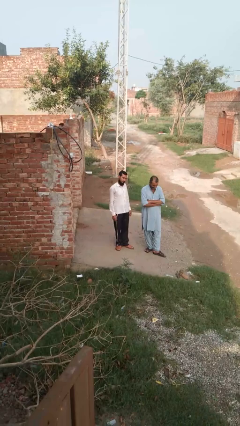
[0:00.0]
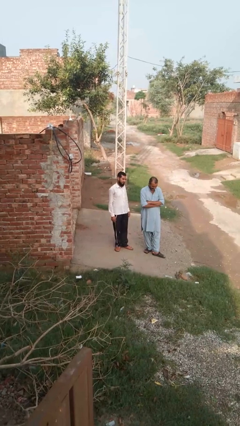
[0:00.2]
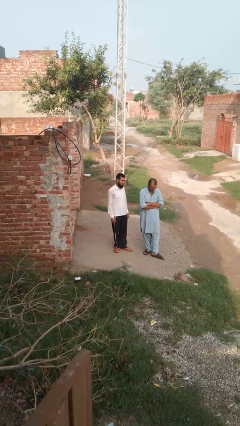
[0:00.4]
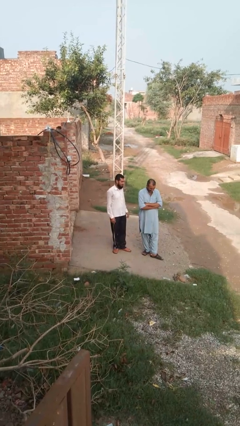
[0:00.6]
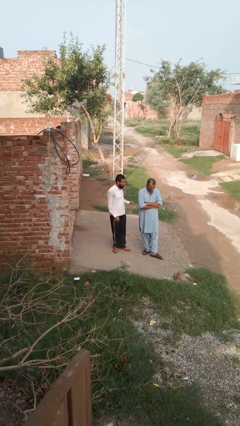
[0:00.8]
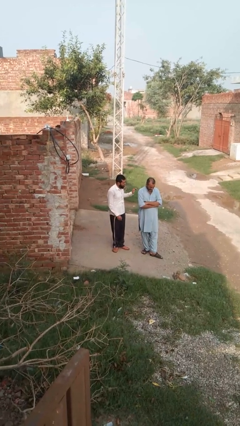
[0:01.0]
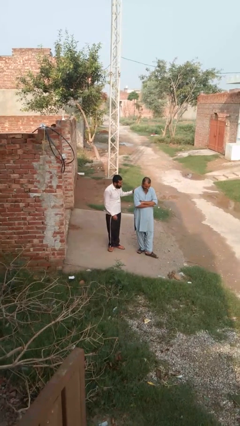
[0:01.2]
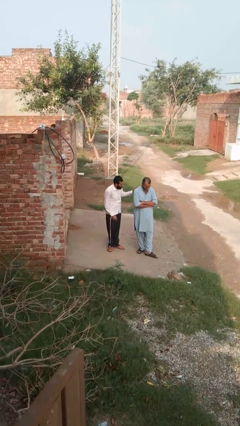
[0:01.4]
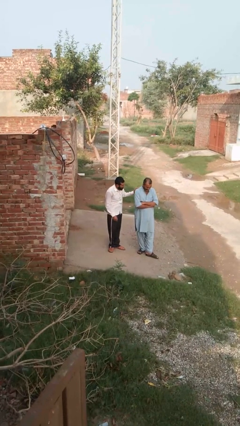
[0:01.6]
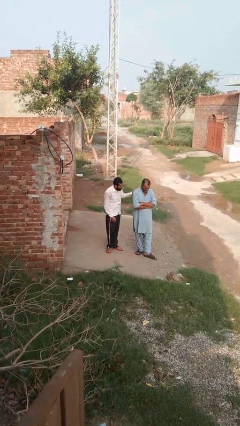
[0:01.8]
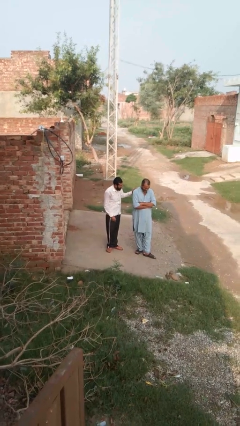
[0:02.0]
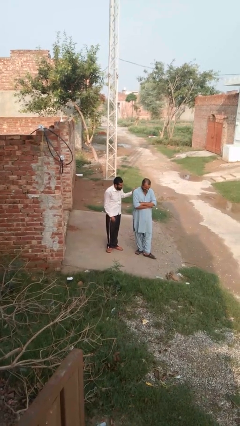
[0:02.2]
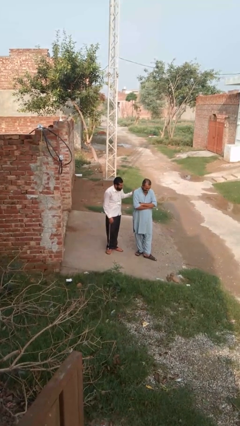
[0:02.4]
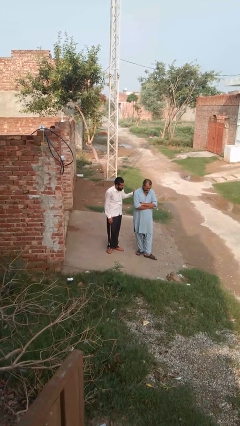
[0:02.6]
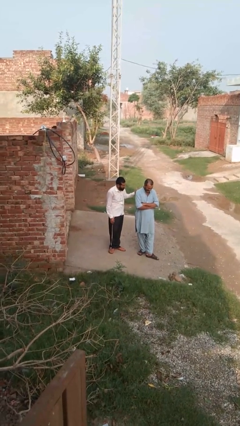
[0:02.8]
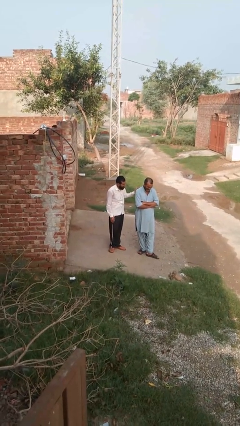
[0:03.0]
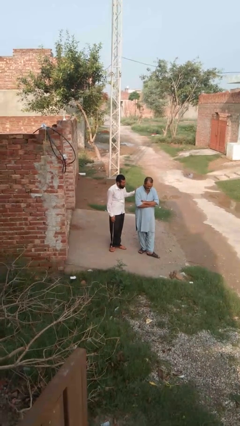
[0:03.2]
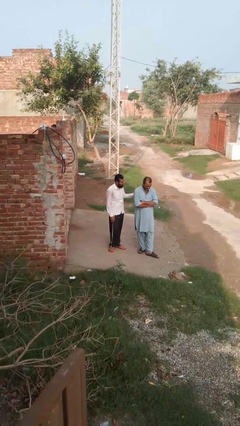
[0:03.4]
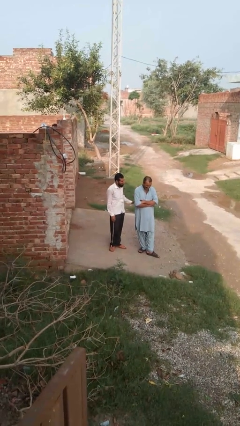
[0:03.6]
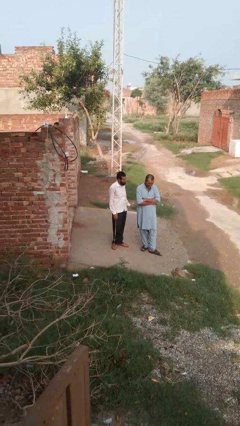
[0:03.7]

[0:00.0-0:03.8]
person pounds shoulders of person

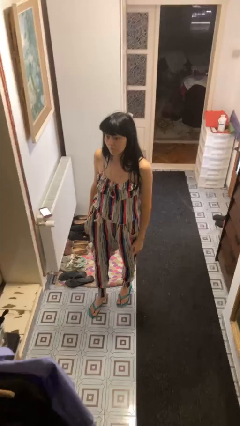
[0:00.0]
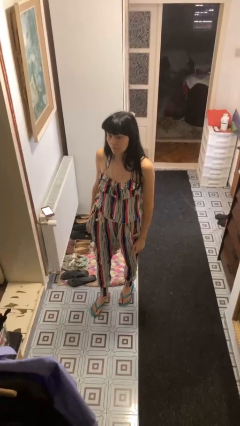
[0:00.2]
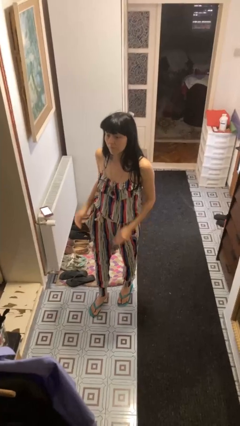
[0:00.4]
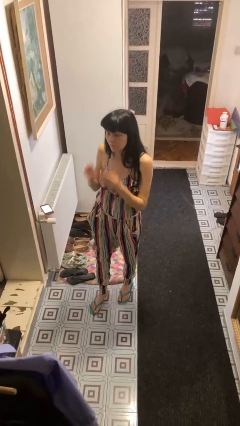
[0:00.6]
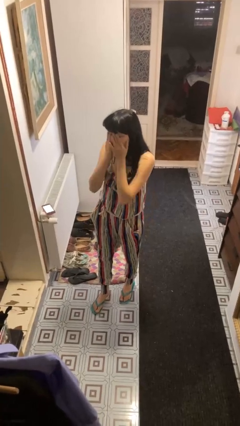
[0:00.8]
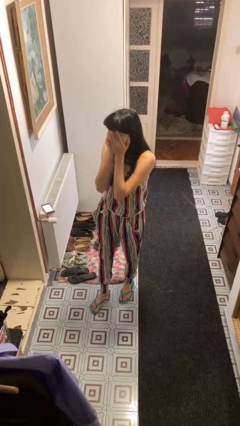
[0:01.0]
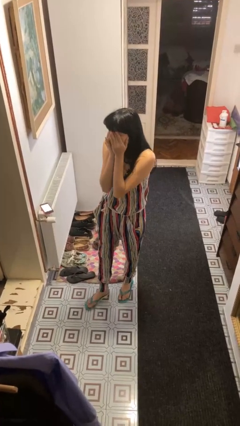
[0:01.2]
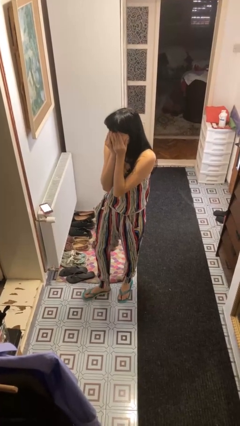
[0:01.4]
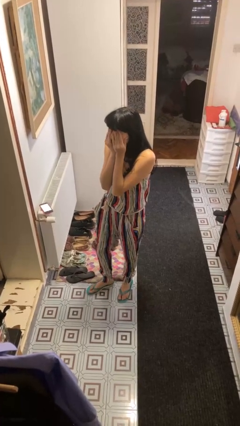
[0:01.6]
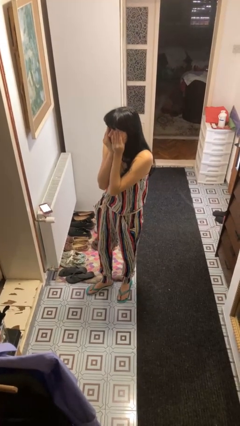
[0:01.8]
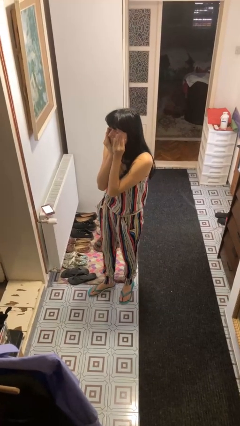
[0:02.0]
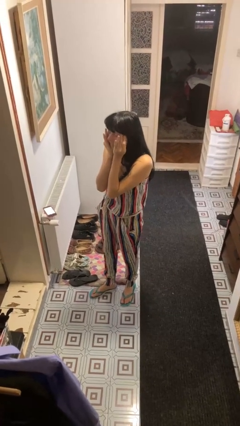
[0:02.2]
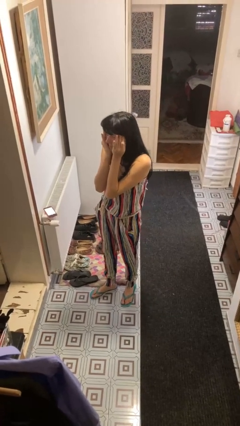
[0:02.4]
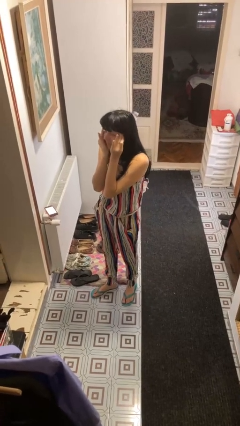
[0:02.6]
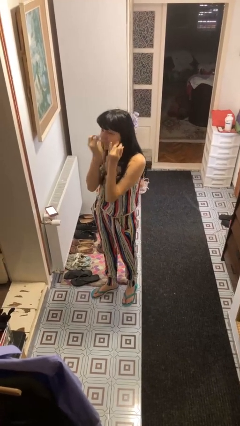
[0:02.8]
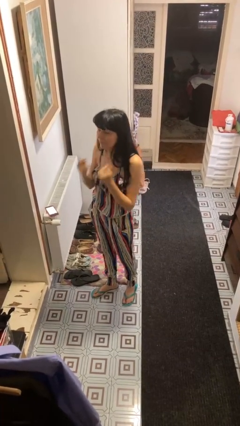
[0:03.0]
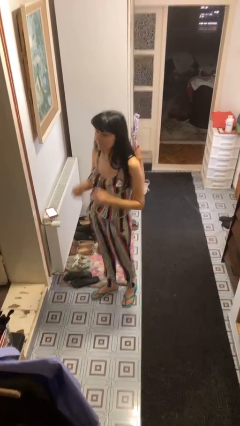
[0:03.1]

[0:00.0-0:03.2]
person rubs eyes

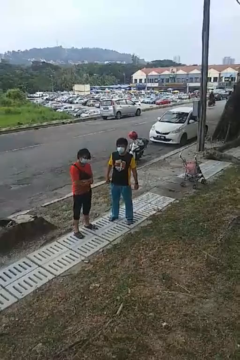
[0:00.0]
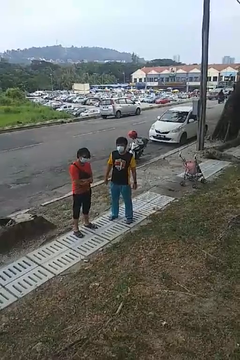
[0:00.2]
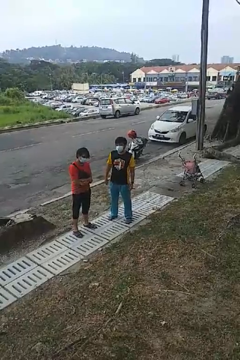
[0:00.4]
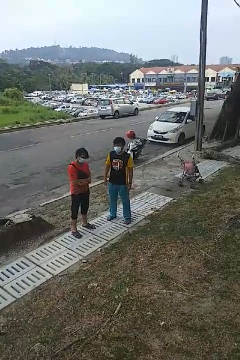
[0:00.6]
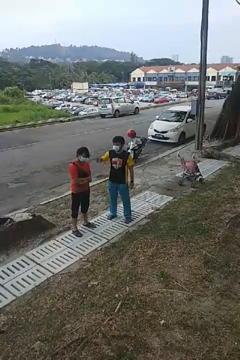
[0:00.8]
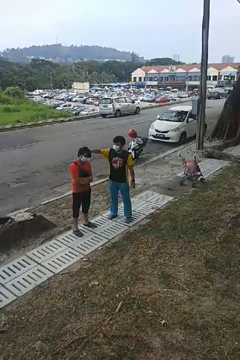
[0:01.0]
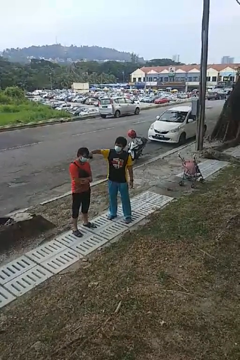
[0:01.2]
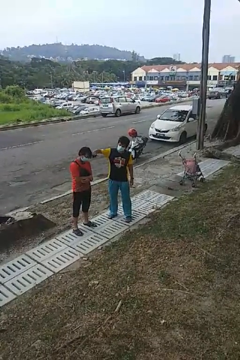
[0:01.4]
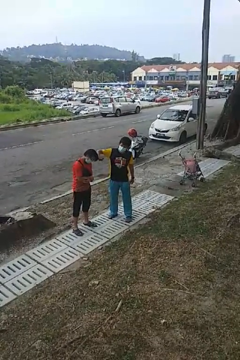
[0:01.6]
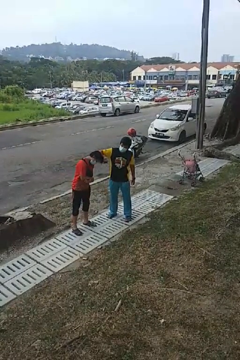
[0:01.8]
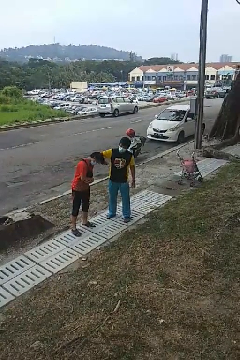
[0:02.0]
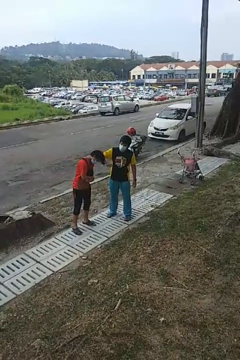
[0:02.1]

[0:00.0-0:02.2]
person grabs person by hair

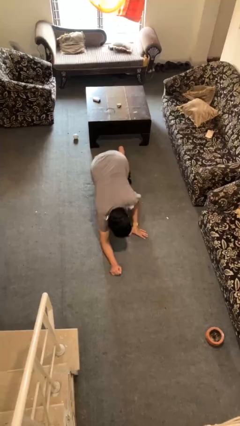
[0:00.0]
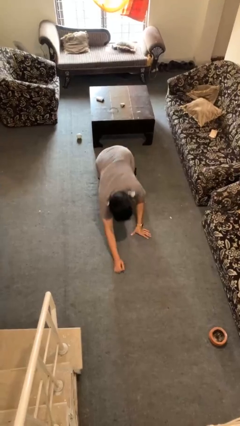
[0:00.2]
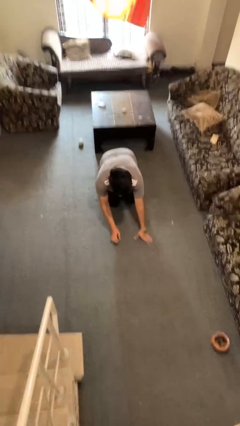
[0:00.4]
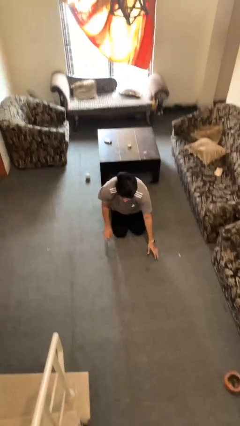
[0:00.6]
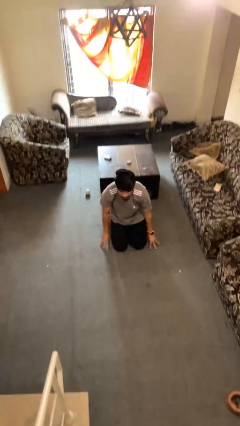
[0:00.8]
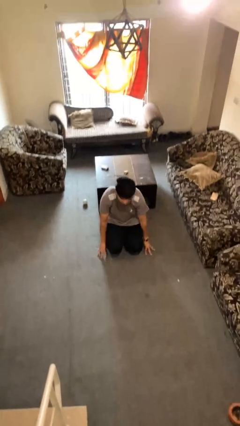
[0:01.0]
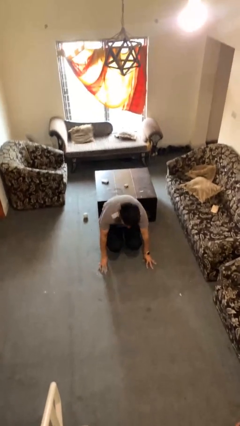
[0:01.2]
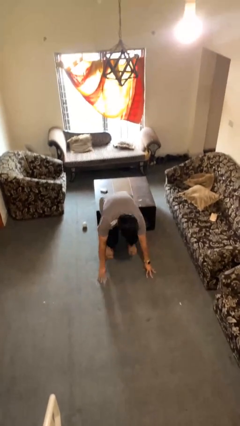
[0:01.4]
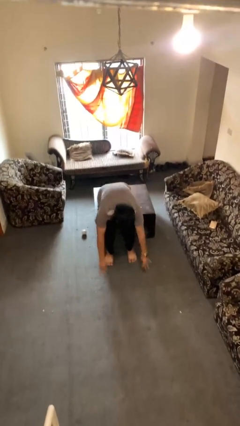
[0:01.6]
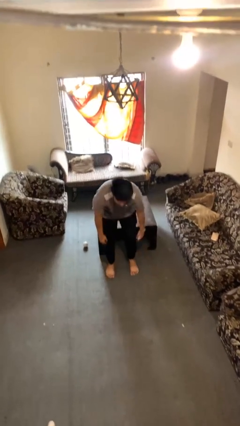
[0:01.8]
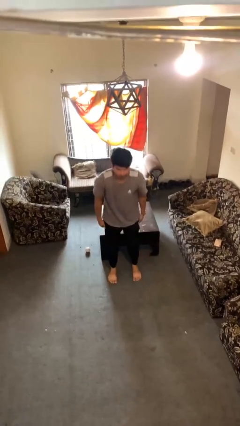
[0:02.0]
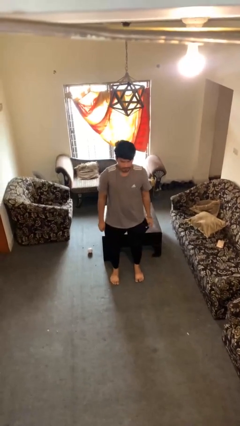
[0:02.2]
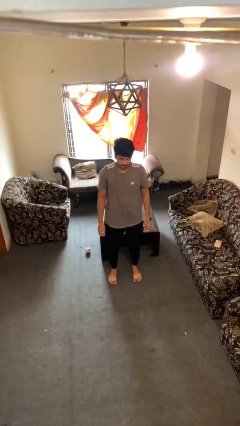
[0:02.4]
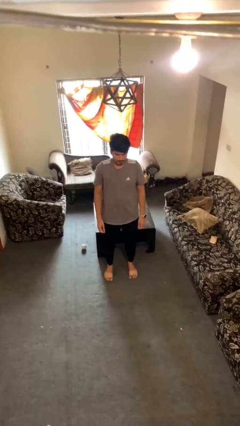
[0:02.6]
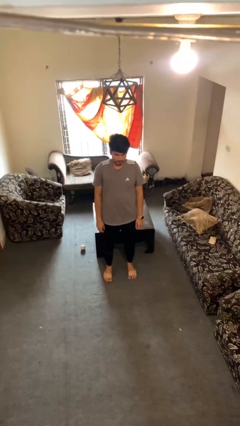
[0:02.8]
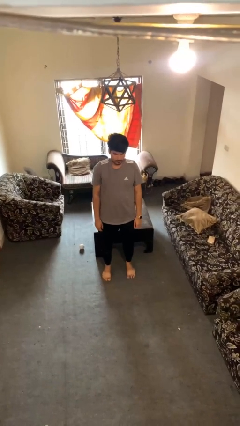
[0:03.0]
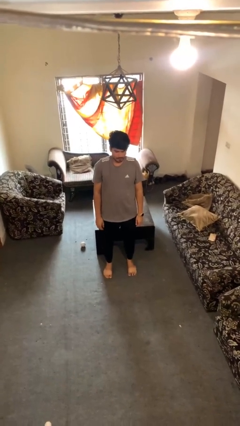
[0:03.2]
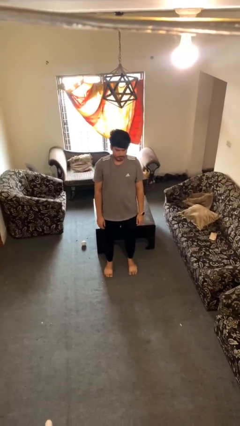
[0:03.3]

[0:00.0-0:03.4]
person stands up from floor

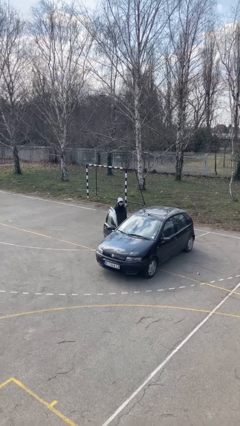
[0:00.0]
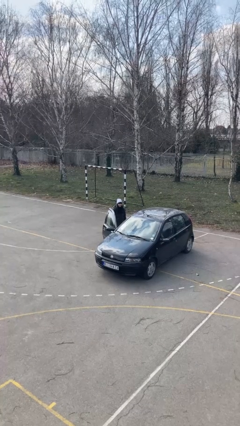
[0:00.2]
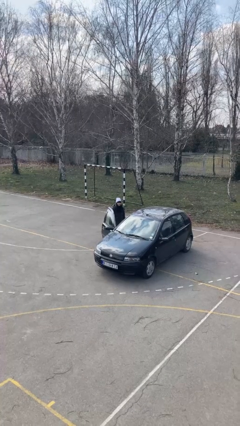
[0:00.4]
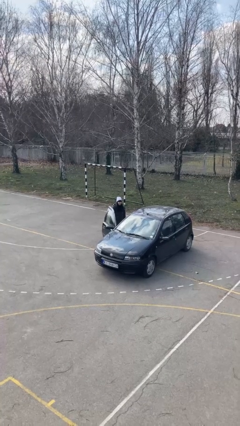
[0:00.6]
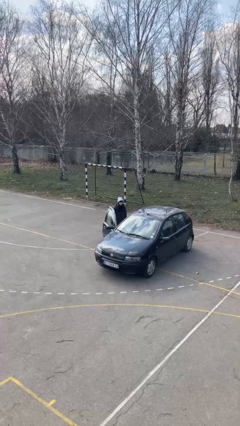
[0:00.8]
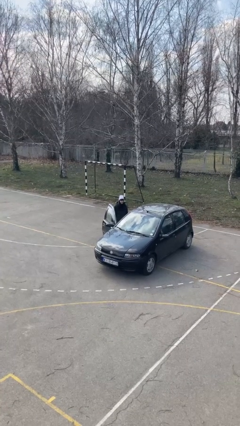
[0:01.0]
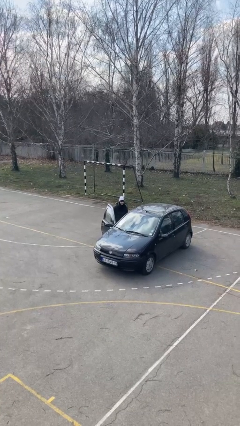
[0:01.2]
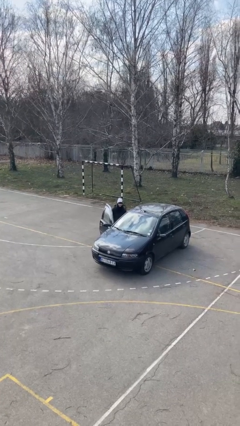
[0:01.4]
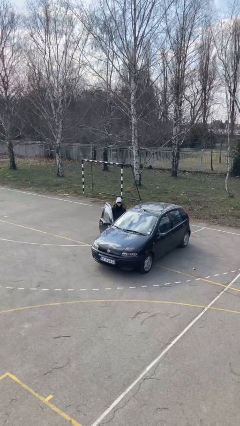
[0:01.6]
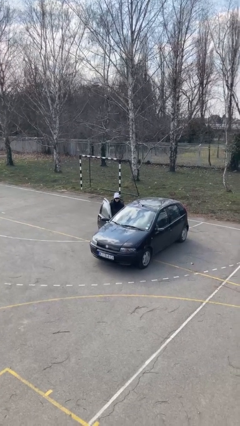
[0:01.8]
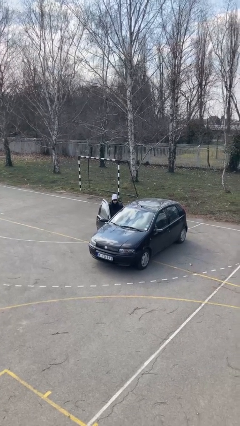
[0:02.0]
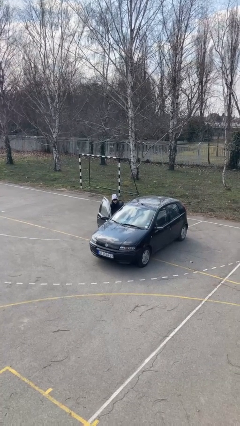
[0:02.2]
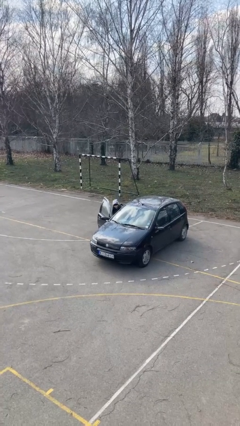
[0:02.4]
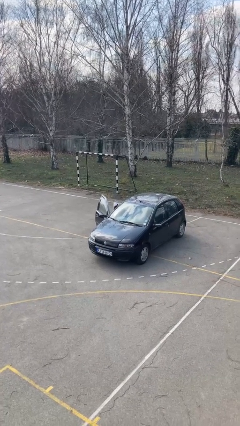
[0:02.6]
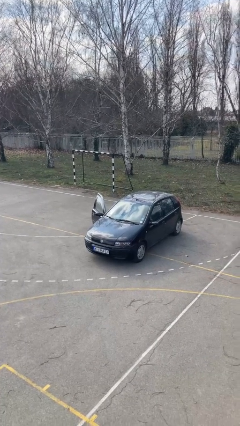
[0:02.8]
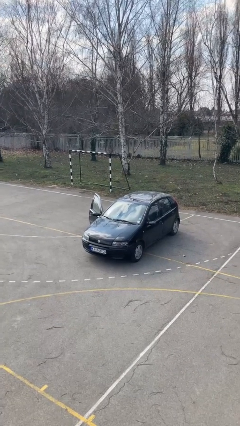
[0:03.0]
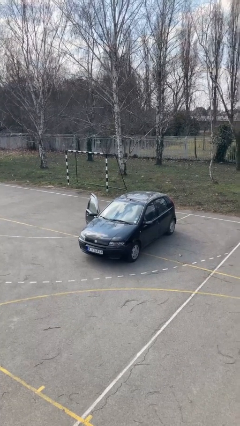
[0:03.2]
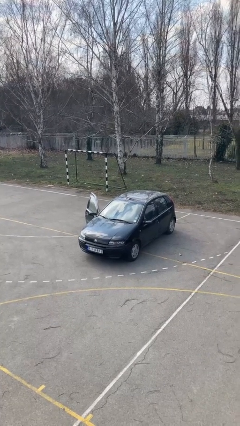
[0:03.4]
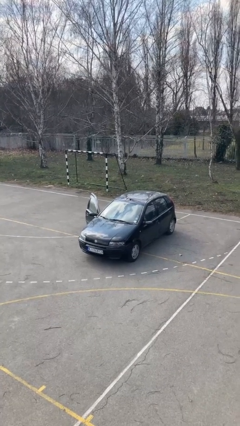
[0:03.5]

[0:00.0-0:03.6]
person enters car

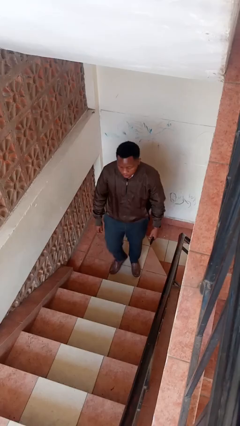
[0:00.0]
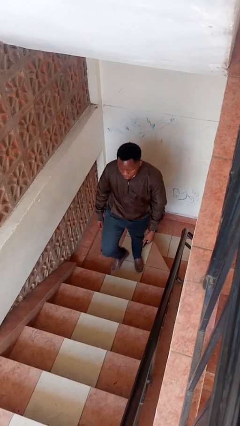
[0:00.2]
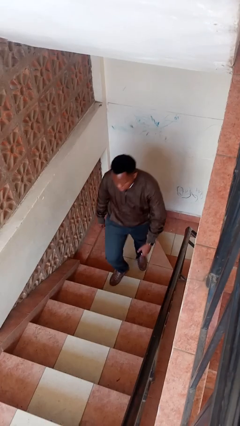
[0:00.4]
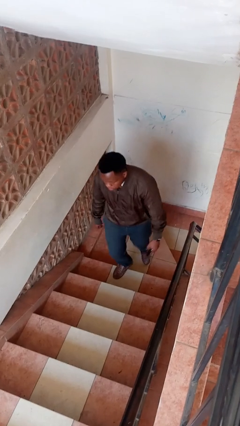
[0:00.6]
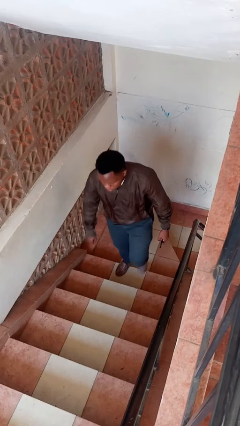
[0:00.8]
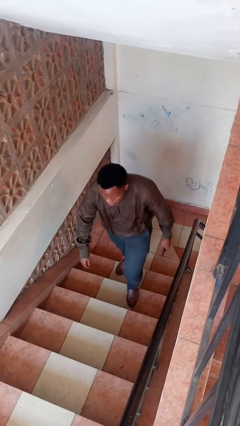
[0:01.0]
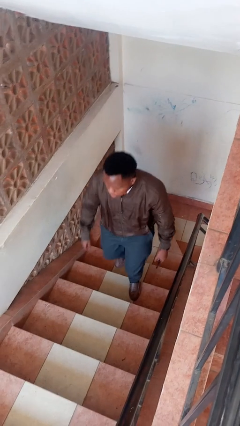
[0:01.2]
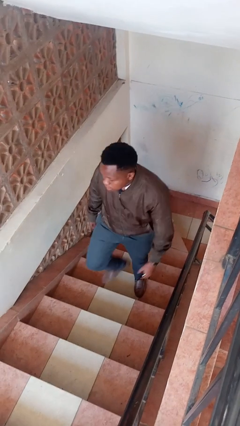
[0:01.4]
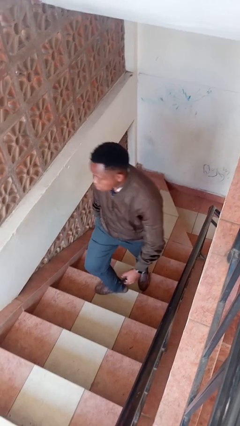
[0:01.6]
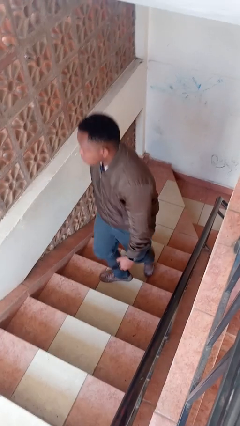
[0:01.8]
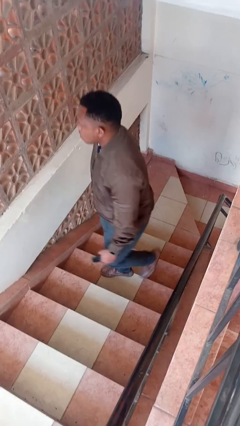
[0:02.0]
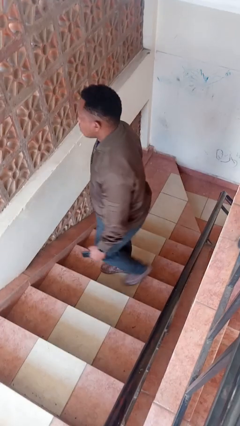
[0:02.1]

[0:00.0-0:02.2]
person climbs up stairs
